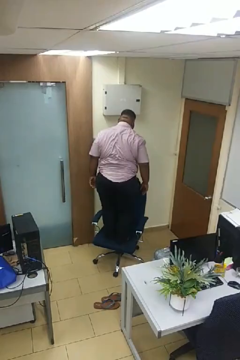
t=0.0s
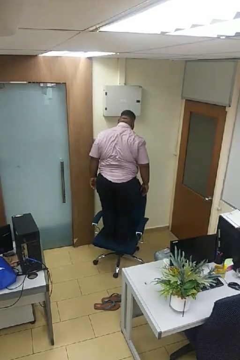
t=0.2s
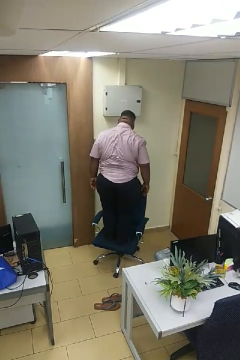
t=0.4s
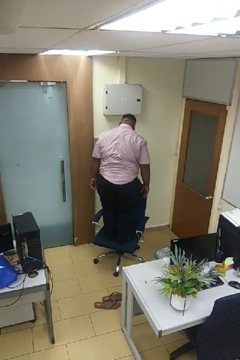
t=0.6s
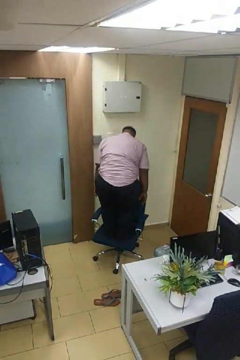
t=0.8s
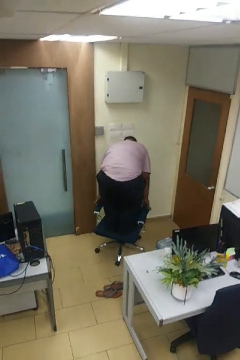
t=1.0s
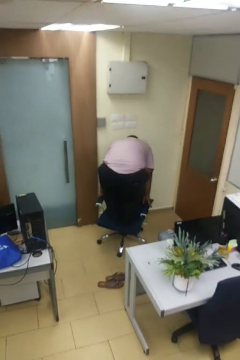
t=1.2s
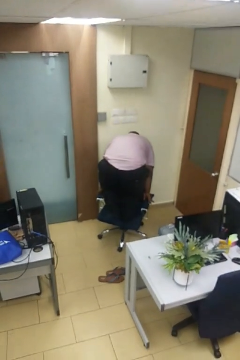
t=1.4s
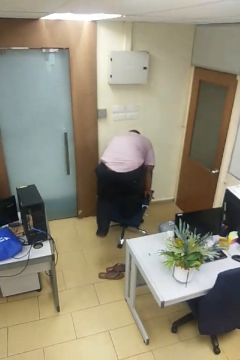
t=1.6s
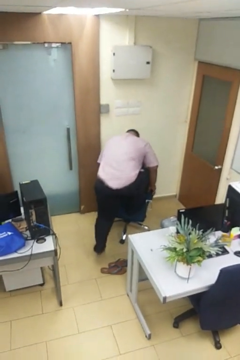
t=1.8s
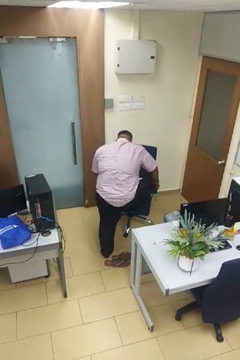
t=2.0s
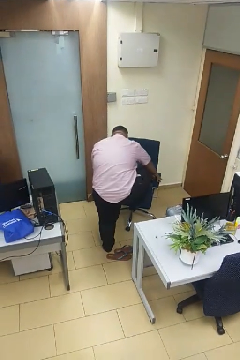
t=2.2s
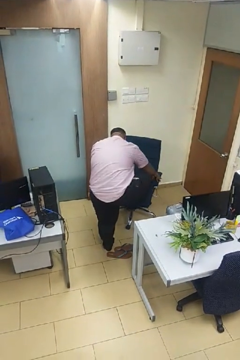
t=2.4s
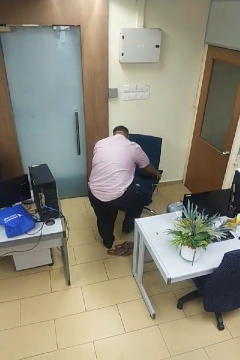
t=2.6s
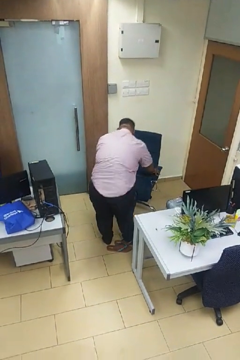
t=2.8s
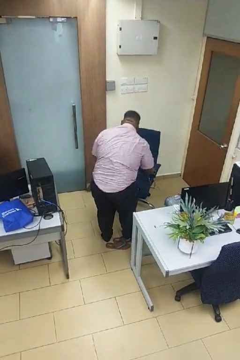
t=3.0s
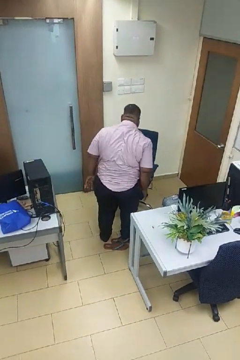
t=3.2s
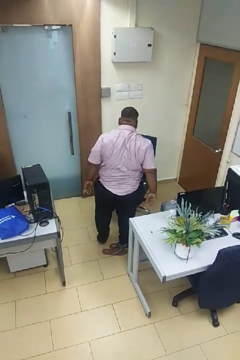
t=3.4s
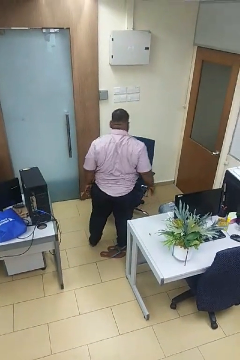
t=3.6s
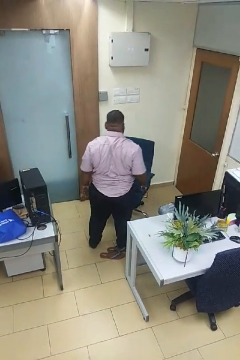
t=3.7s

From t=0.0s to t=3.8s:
person climbs off chair

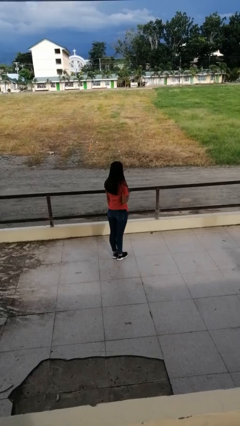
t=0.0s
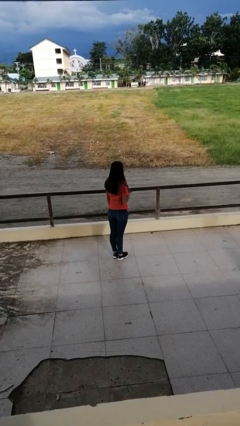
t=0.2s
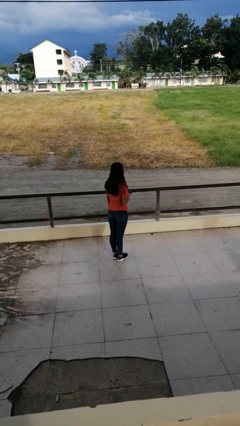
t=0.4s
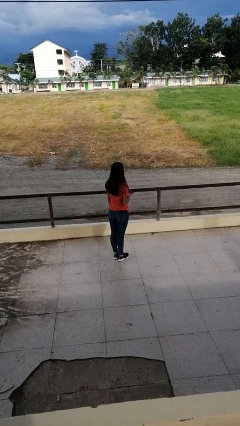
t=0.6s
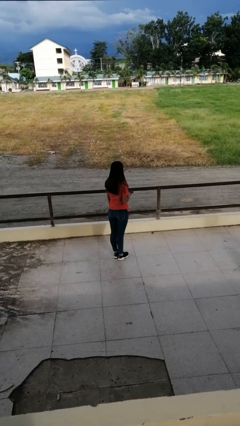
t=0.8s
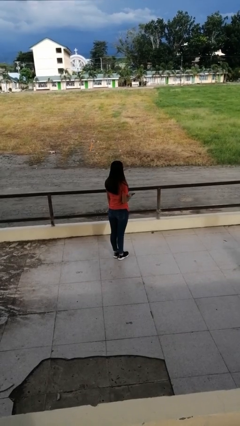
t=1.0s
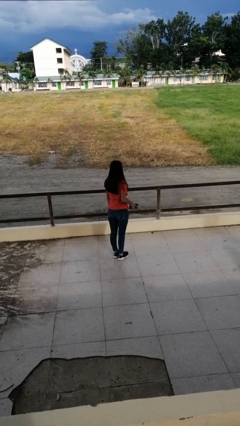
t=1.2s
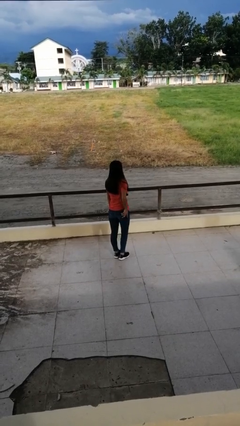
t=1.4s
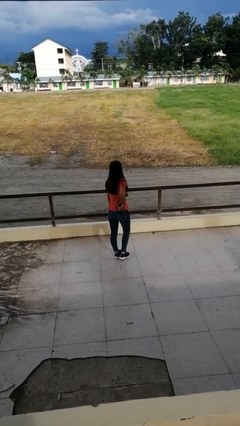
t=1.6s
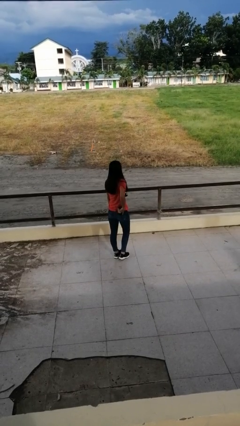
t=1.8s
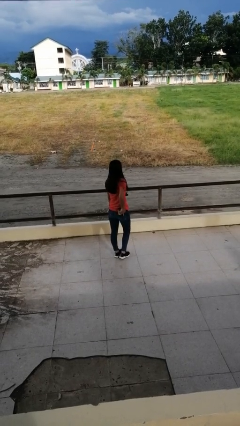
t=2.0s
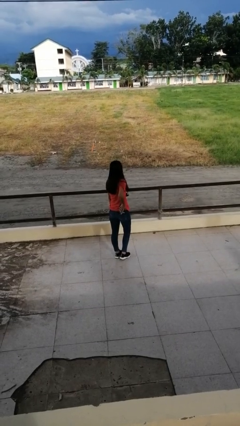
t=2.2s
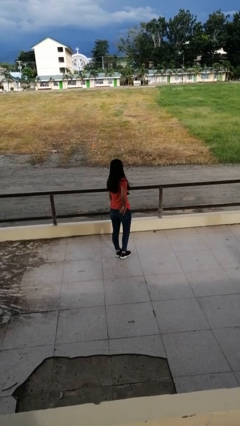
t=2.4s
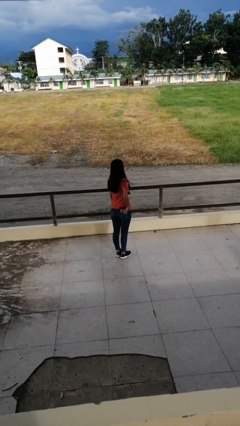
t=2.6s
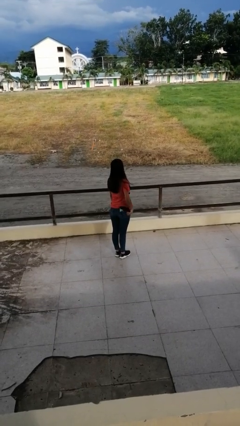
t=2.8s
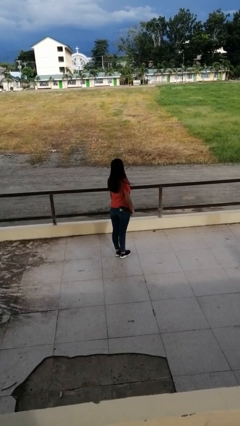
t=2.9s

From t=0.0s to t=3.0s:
person puts phone into pocket

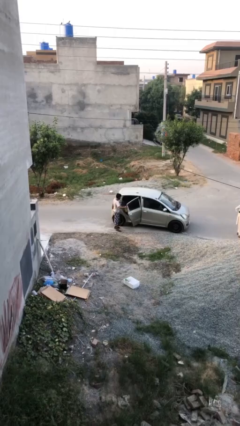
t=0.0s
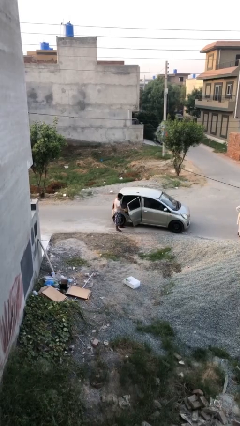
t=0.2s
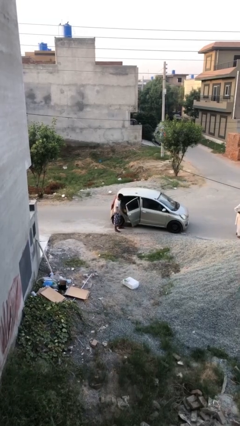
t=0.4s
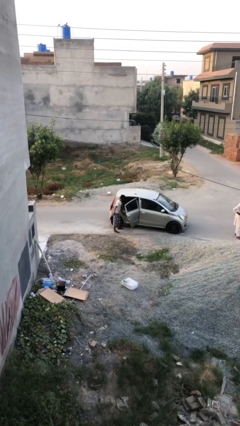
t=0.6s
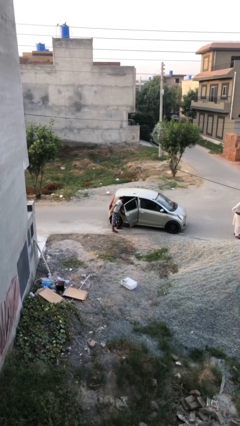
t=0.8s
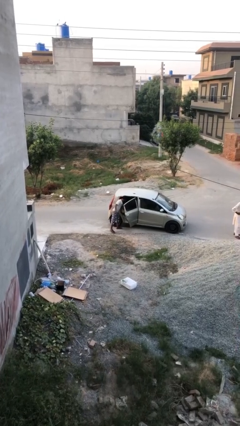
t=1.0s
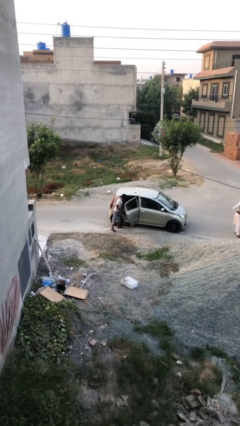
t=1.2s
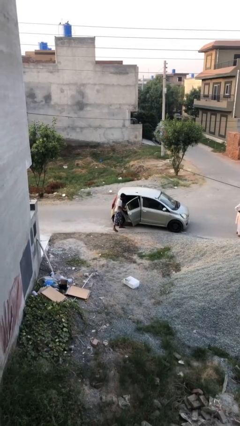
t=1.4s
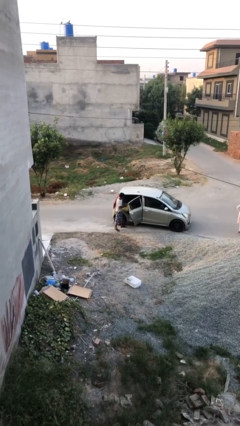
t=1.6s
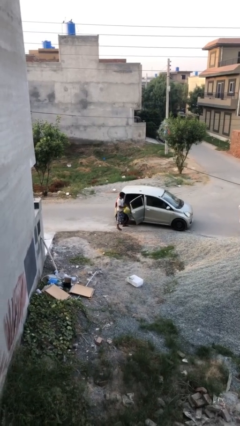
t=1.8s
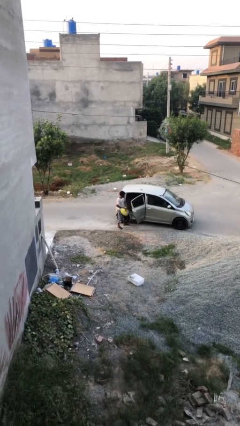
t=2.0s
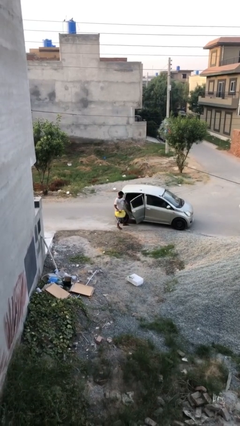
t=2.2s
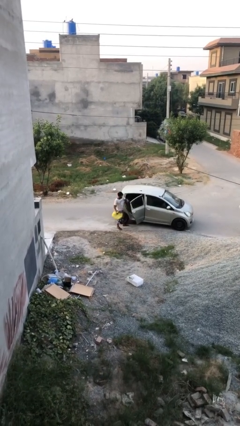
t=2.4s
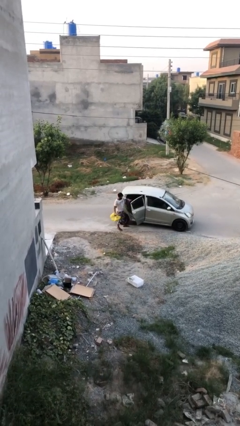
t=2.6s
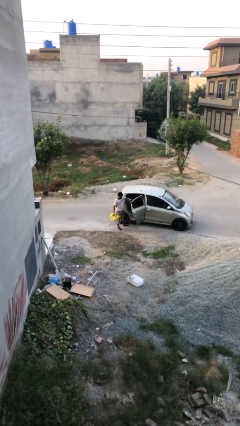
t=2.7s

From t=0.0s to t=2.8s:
person unloads car

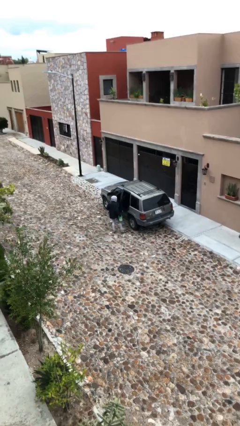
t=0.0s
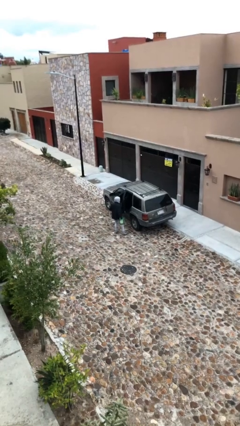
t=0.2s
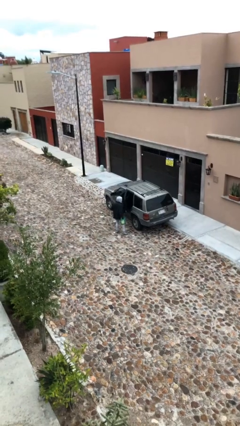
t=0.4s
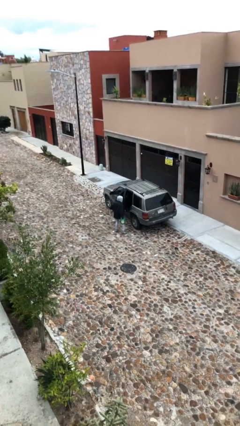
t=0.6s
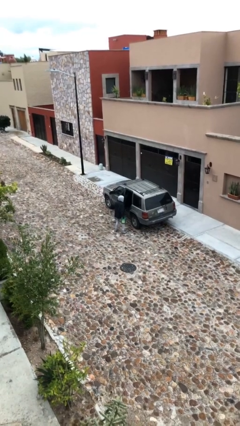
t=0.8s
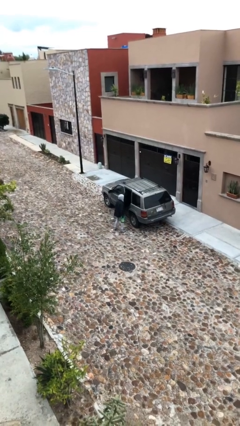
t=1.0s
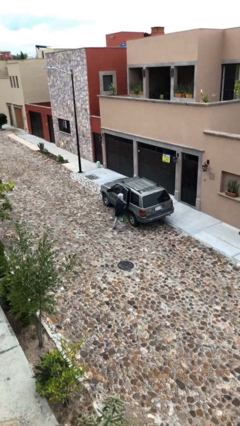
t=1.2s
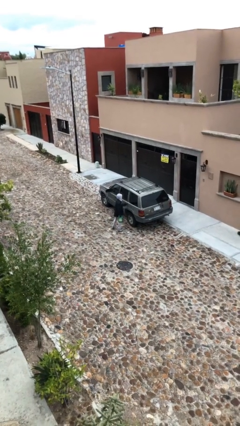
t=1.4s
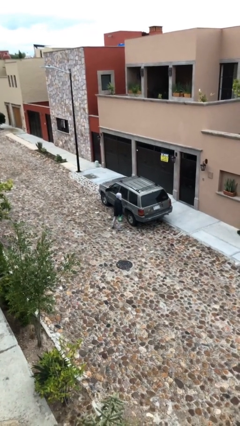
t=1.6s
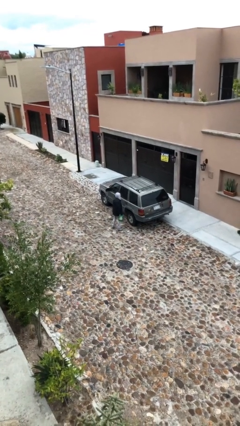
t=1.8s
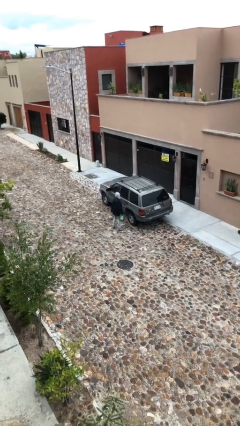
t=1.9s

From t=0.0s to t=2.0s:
person closes car door

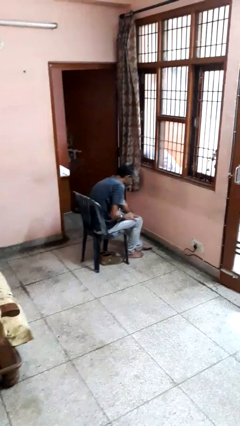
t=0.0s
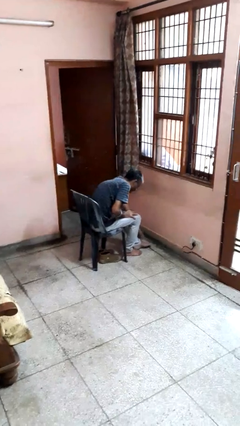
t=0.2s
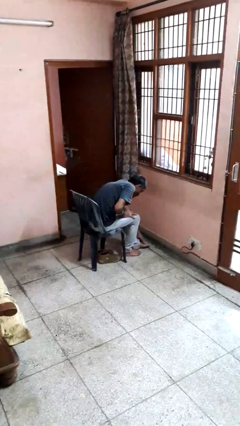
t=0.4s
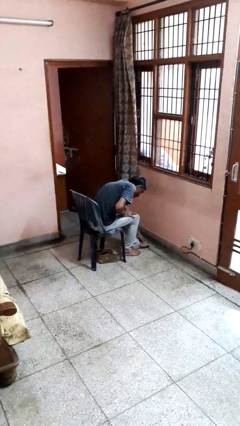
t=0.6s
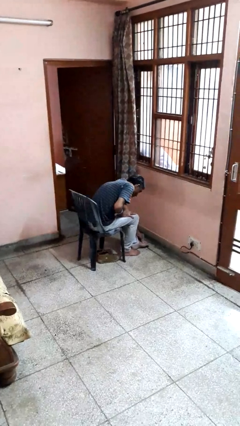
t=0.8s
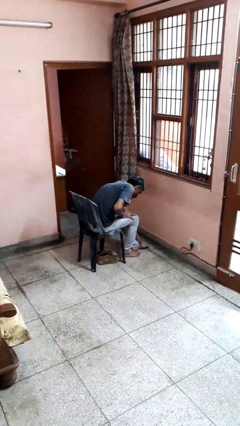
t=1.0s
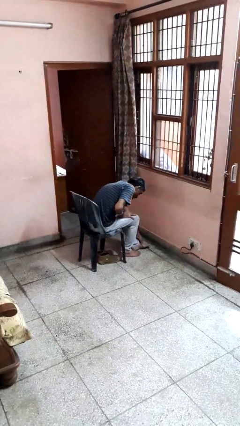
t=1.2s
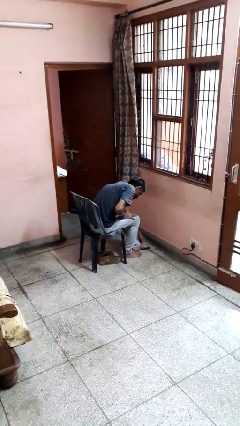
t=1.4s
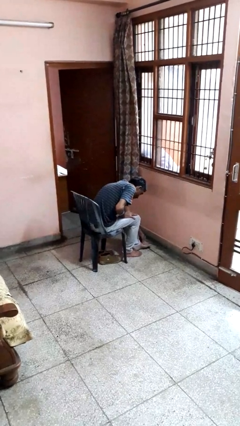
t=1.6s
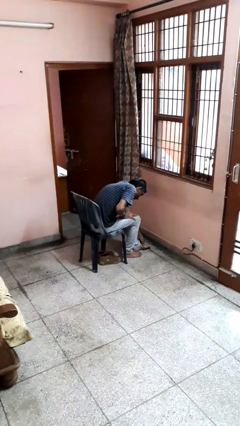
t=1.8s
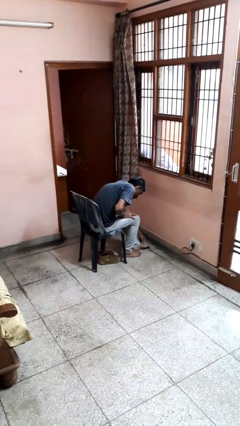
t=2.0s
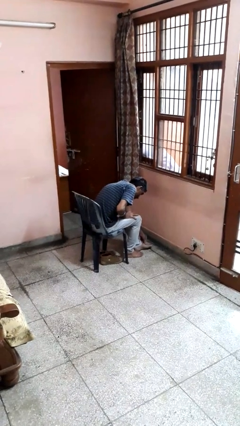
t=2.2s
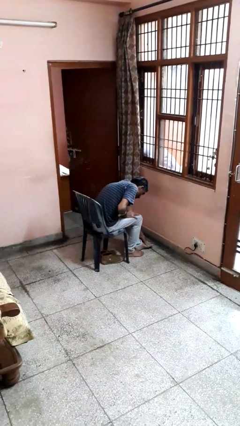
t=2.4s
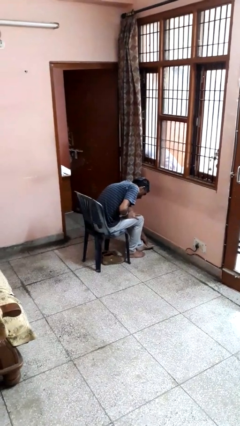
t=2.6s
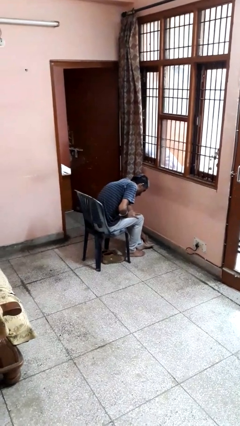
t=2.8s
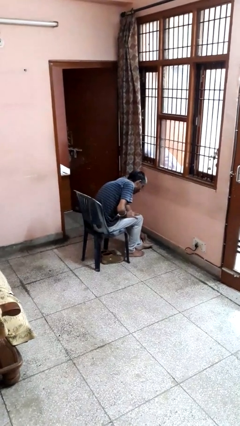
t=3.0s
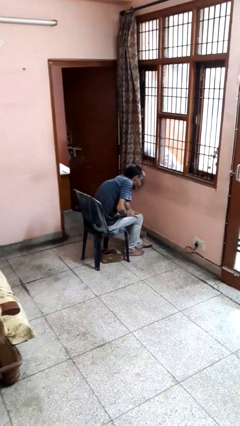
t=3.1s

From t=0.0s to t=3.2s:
person rubs foot

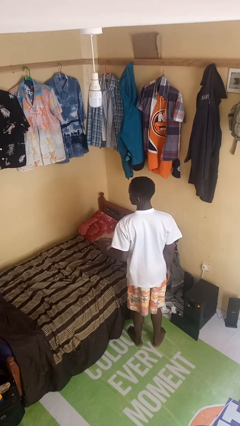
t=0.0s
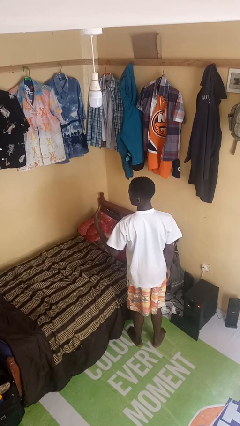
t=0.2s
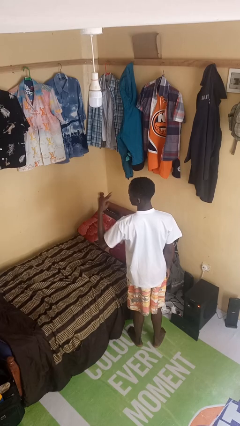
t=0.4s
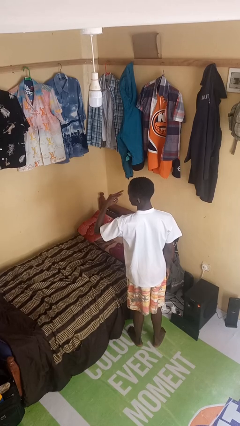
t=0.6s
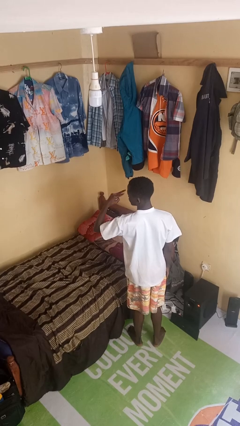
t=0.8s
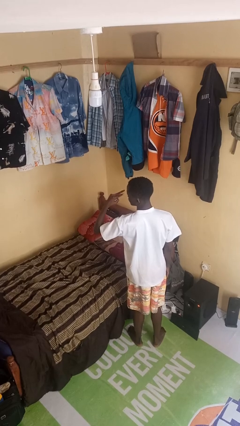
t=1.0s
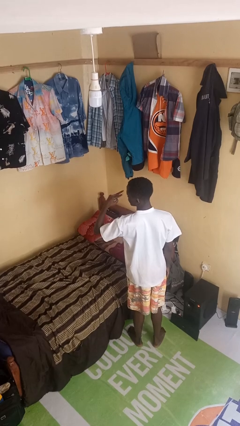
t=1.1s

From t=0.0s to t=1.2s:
person gestures watch closely

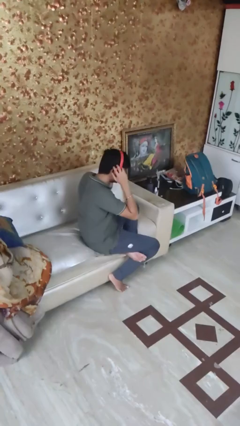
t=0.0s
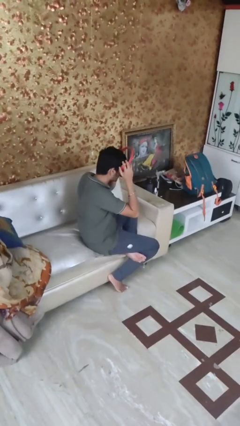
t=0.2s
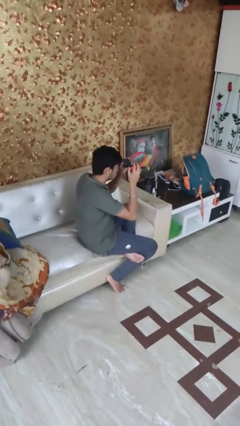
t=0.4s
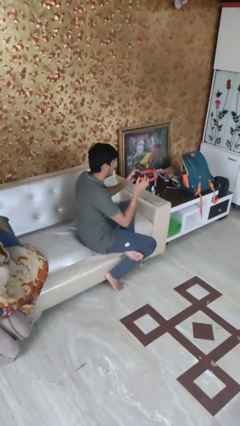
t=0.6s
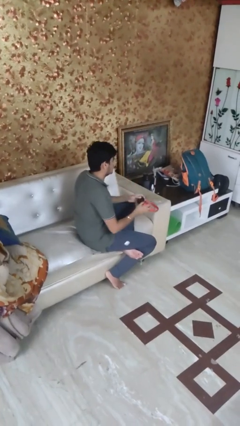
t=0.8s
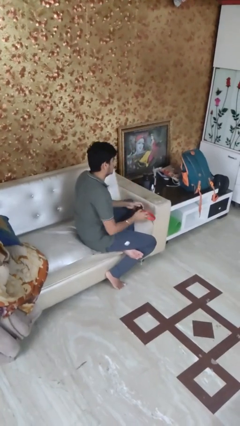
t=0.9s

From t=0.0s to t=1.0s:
person takes off headphones

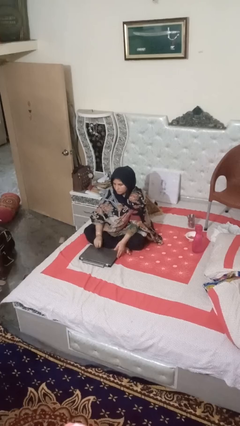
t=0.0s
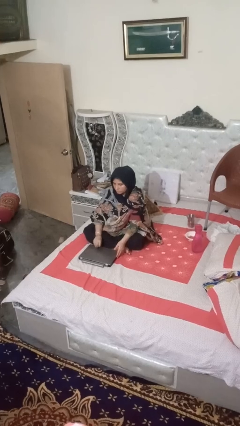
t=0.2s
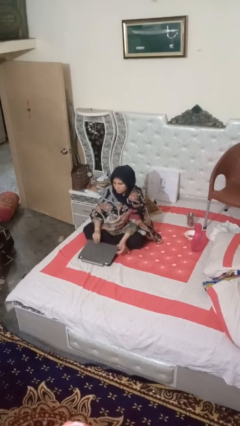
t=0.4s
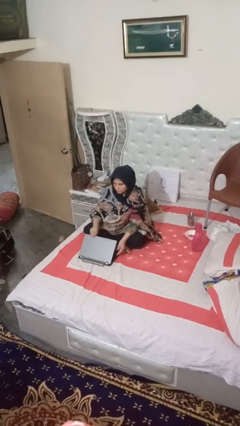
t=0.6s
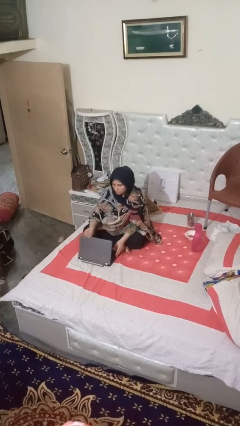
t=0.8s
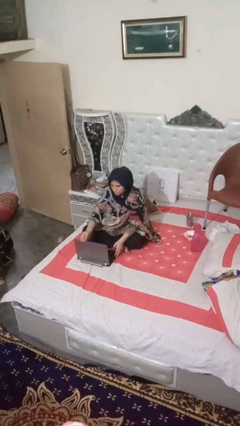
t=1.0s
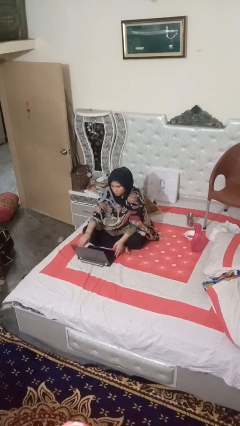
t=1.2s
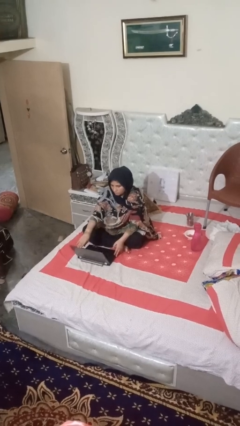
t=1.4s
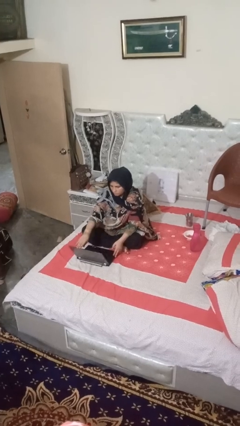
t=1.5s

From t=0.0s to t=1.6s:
person opens laptop
